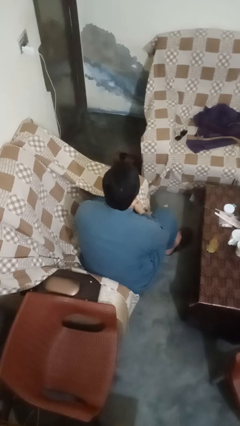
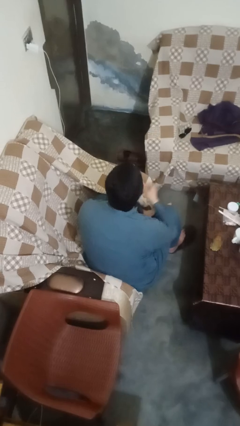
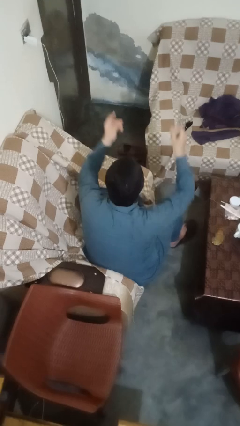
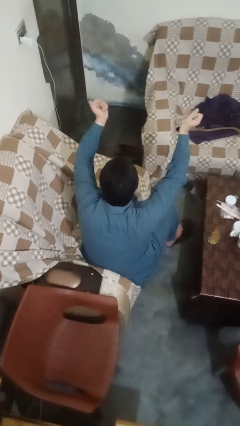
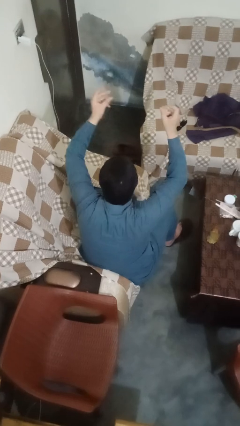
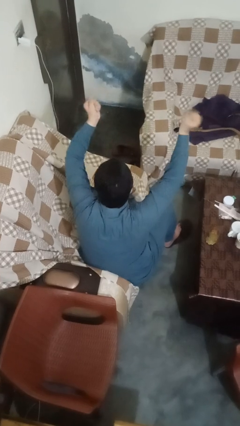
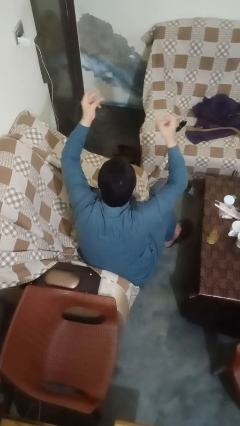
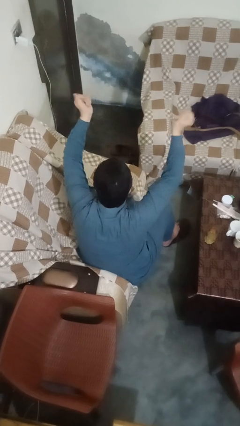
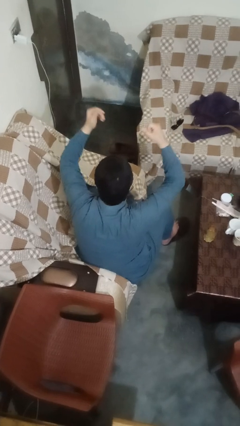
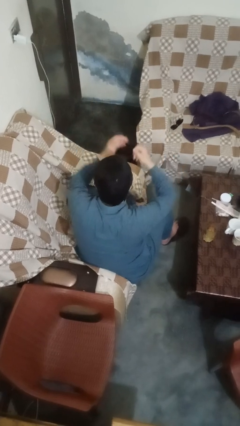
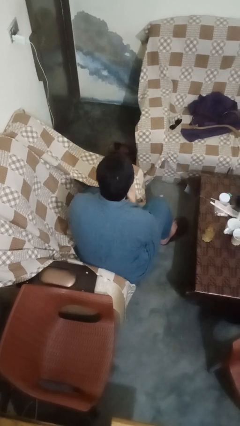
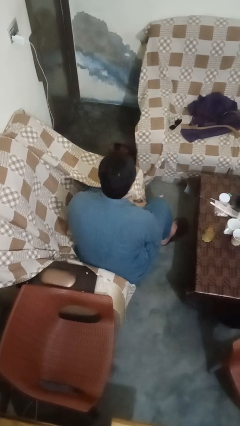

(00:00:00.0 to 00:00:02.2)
person snaps fingers

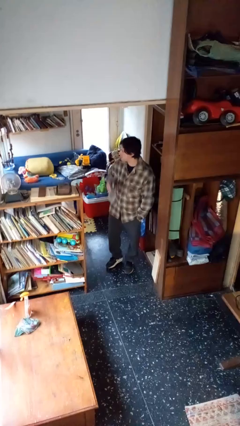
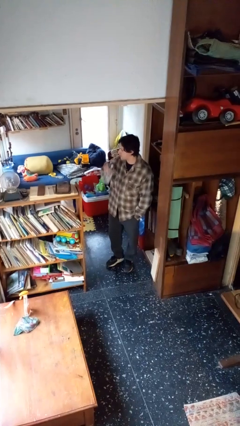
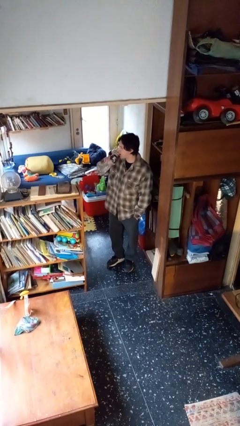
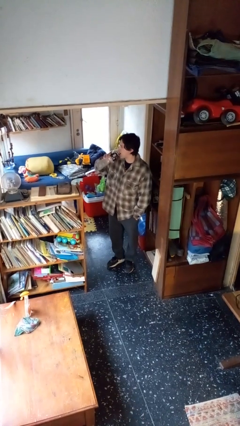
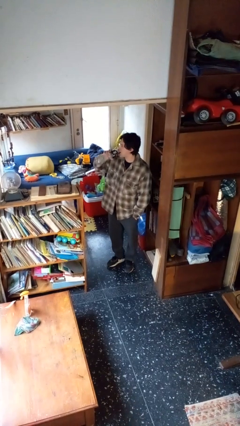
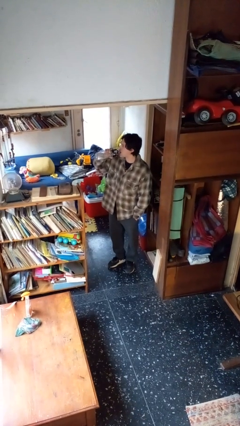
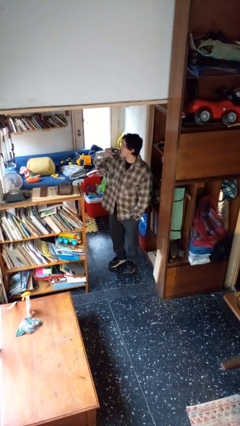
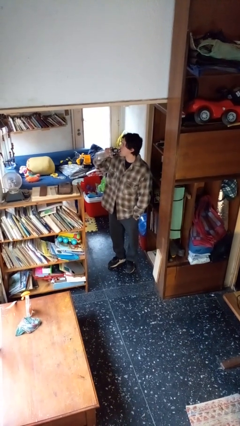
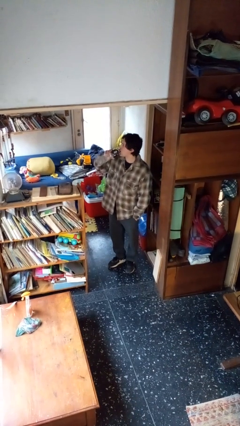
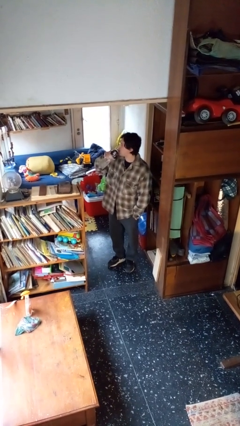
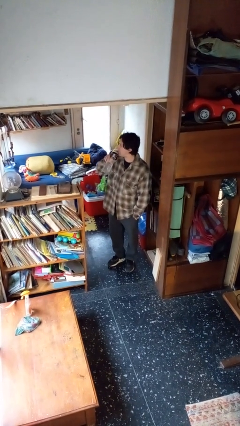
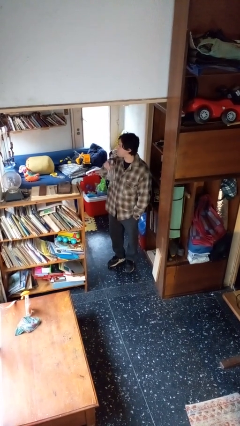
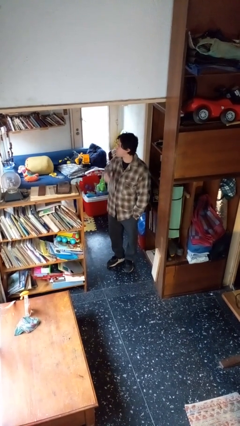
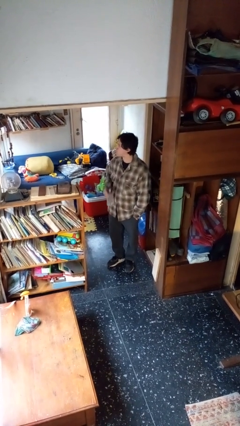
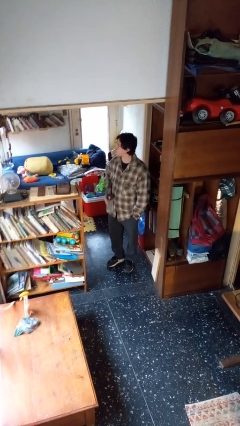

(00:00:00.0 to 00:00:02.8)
person drinks from bottle

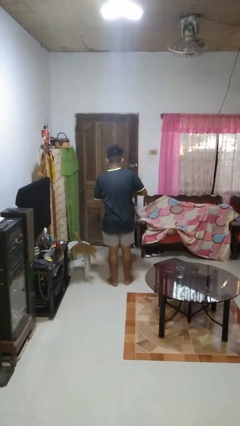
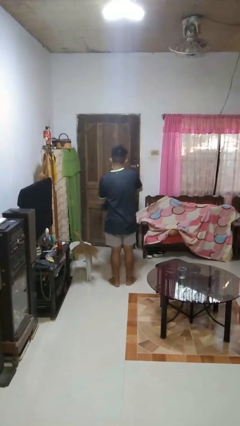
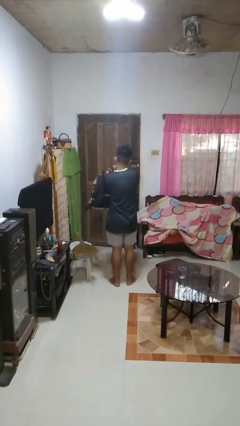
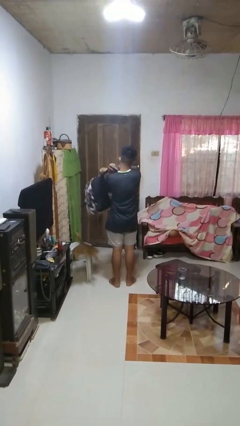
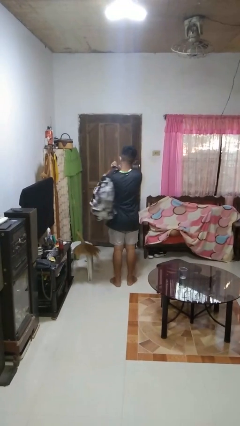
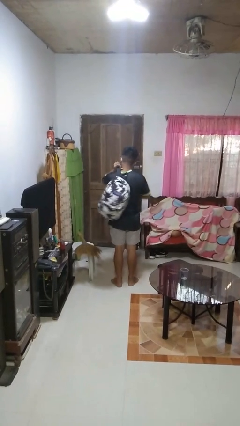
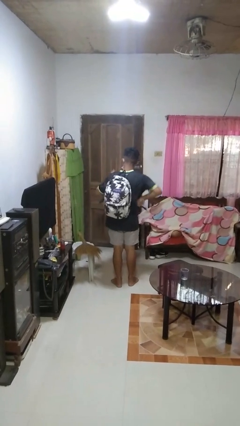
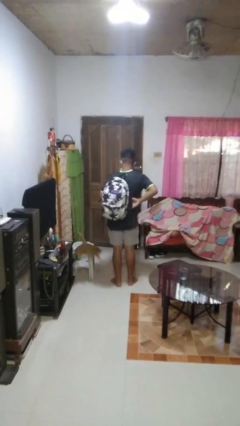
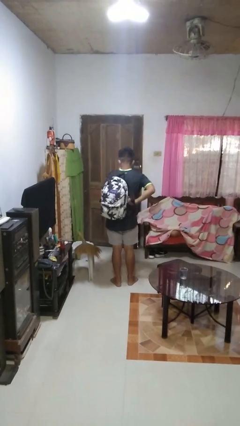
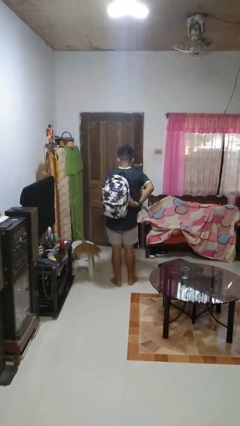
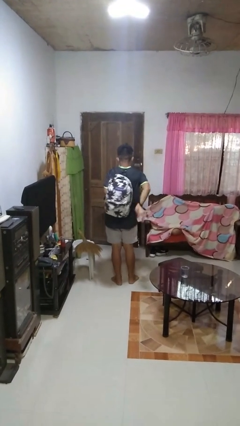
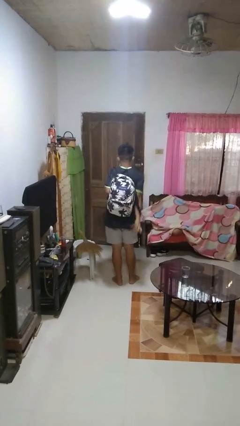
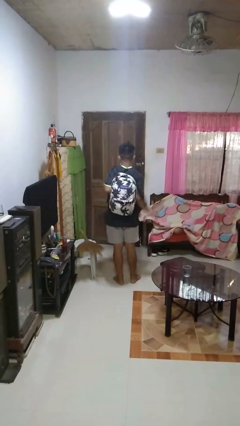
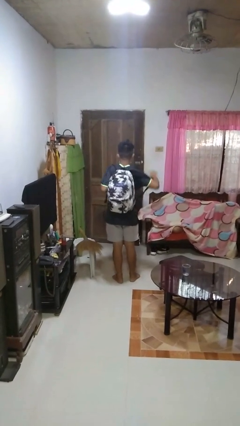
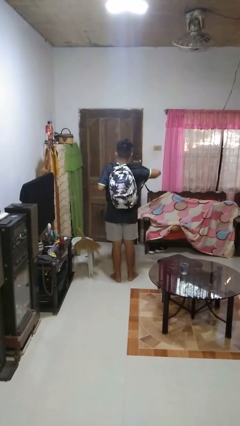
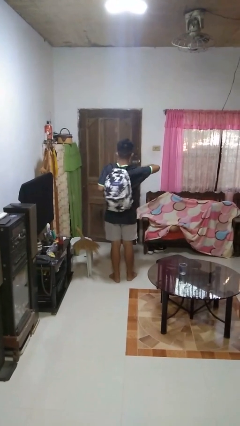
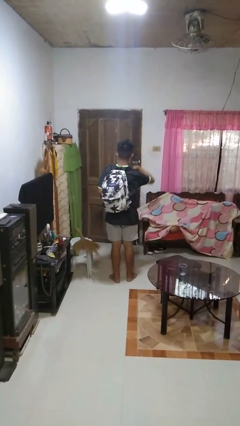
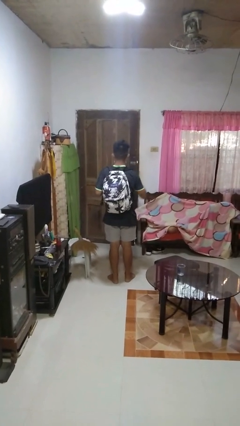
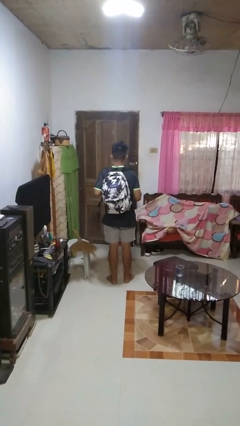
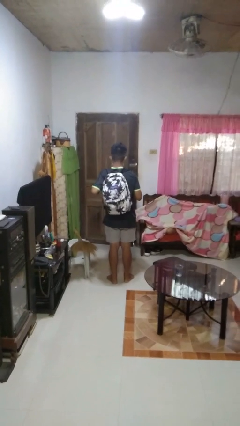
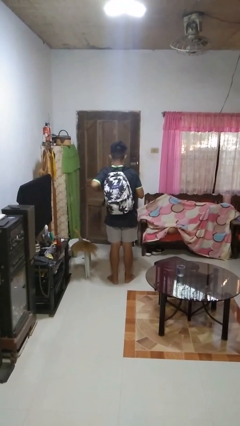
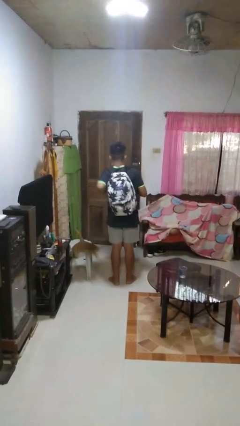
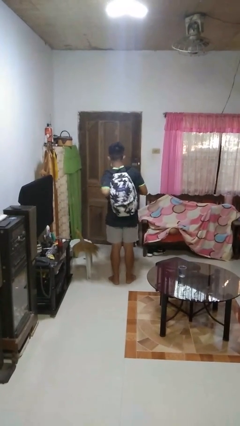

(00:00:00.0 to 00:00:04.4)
person puts on backpack

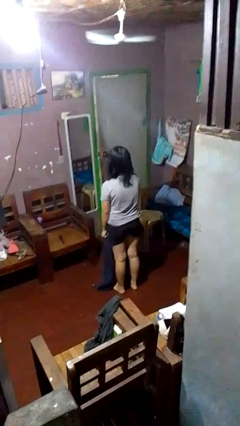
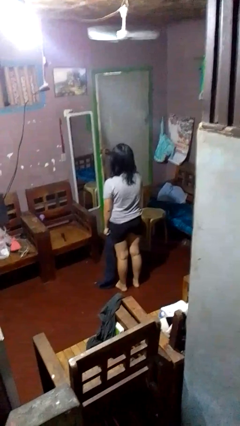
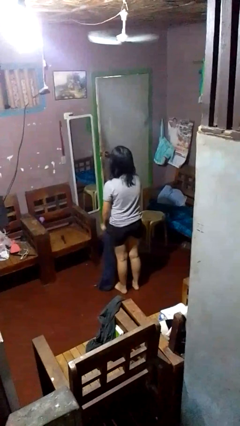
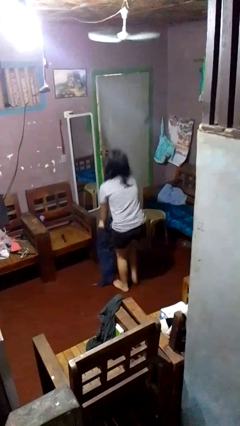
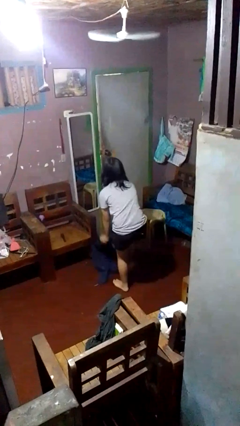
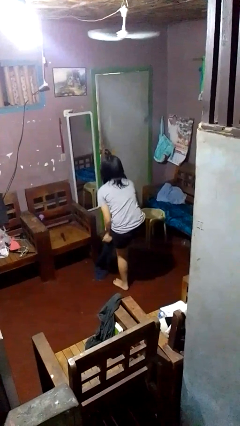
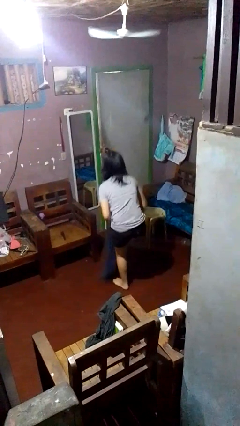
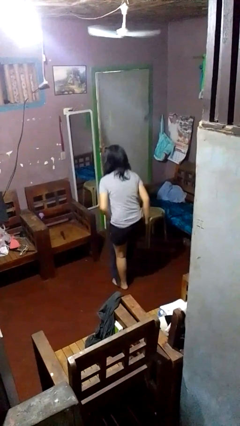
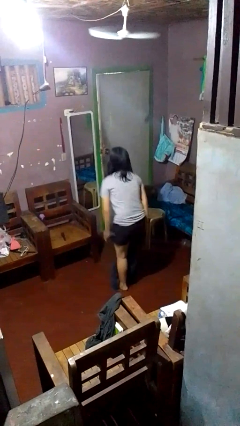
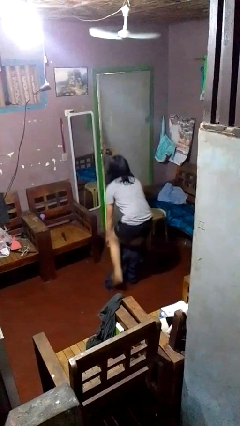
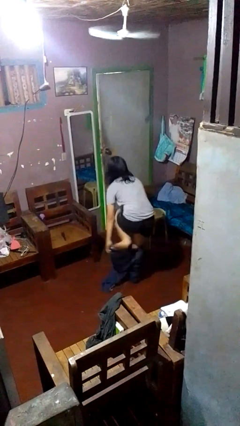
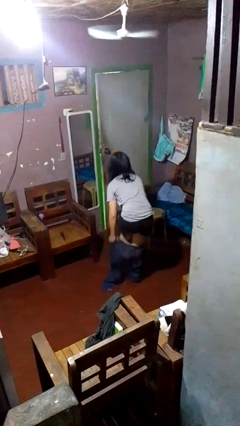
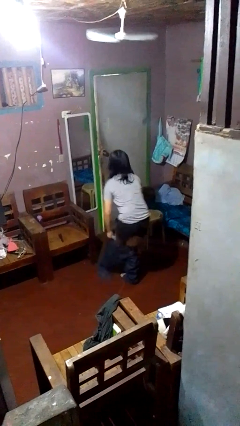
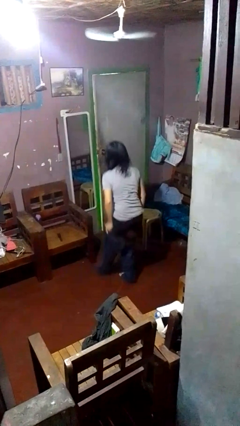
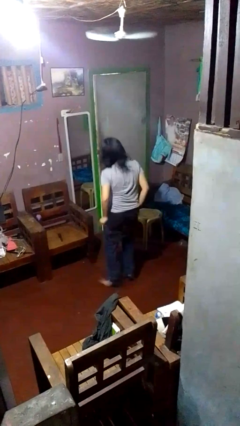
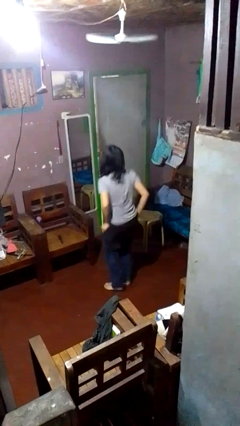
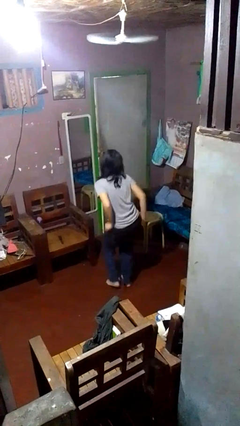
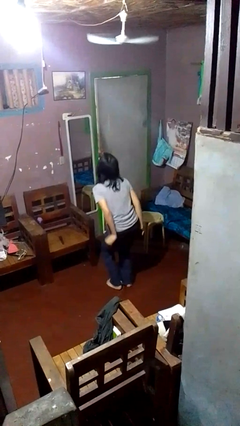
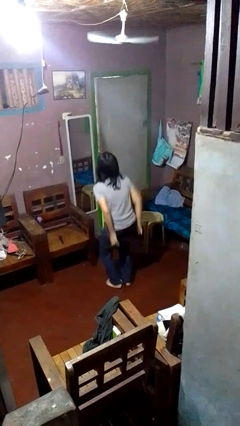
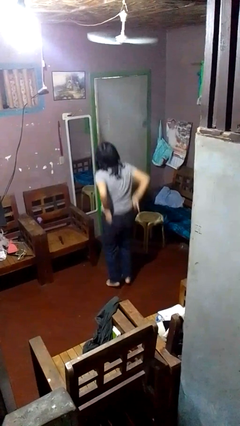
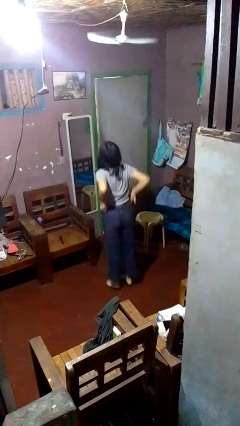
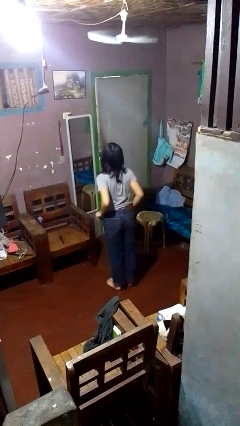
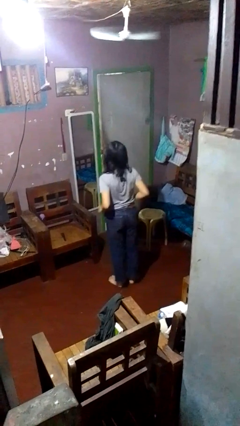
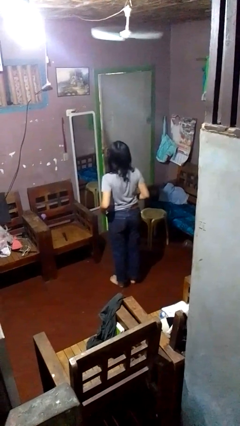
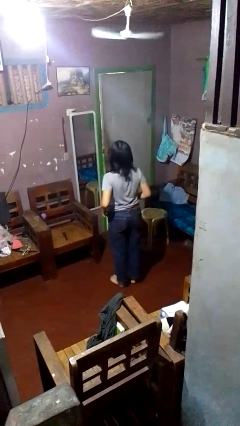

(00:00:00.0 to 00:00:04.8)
person puts on pants

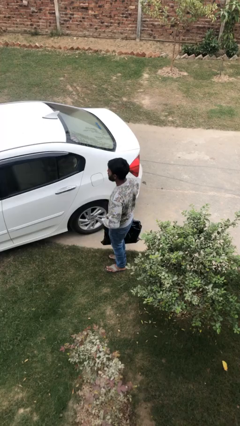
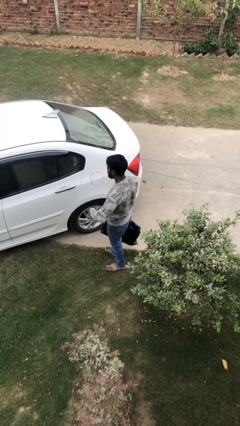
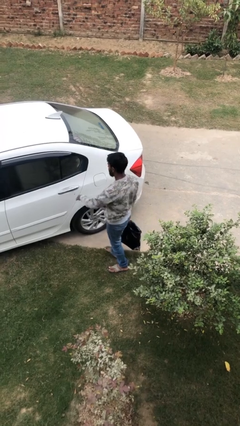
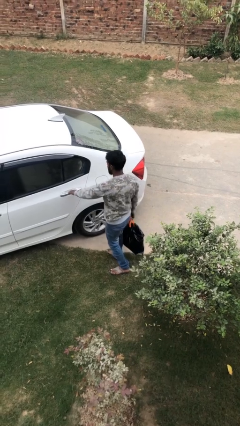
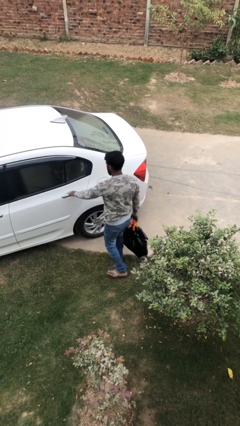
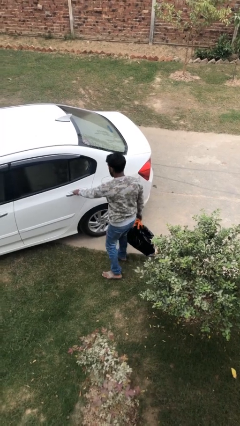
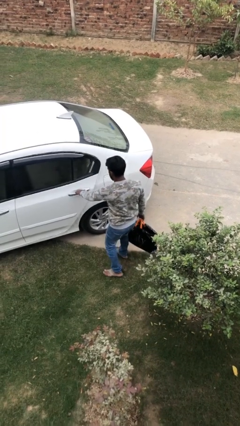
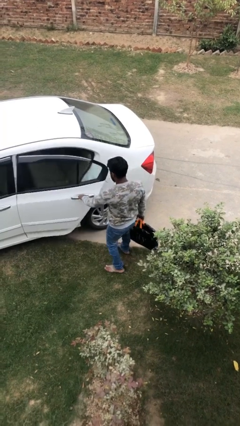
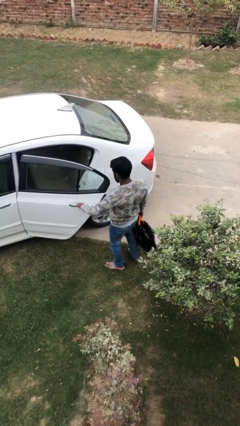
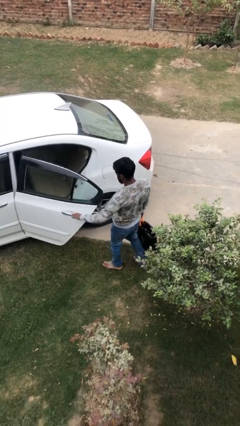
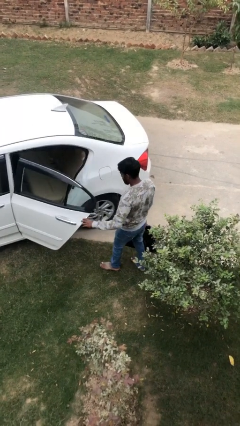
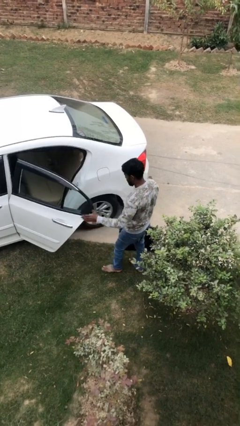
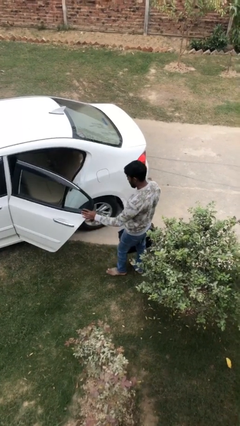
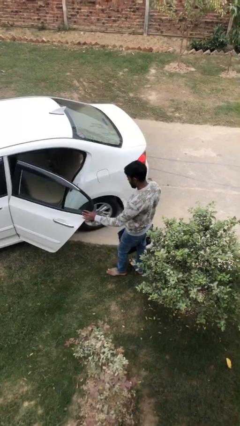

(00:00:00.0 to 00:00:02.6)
person opens car door

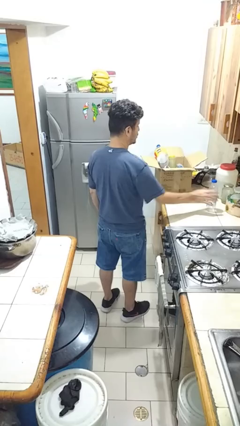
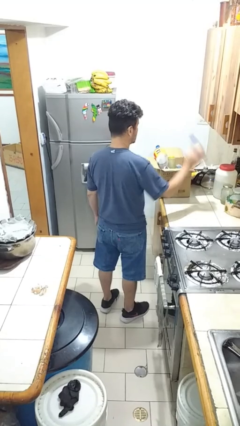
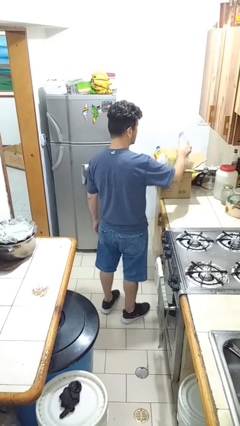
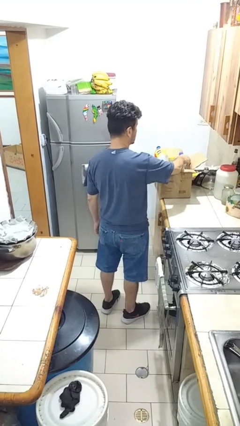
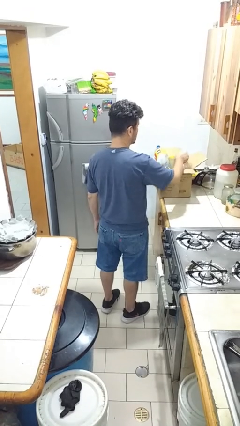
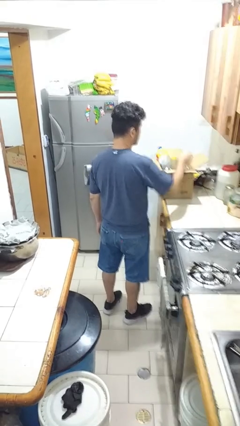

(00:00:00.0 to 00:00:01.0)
person puts object into box
